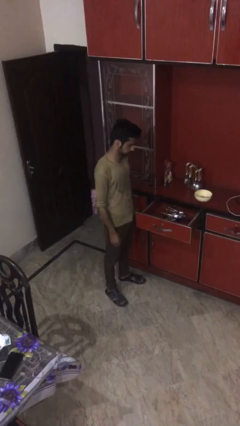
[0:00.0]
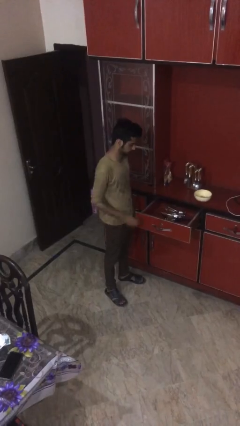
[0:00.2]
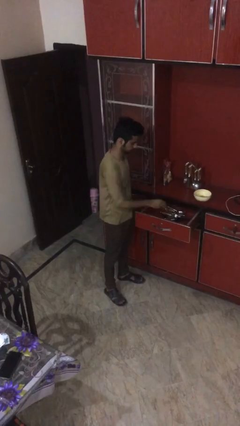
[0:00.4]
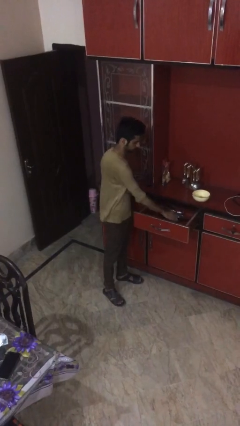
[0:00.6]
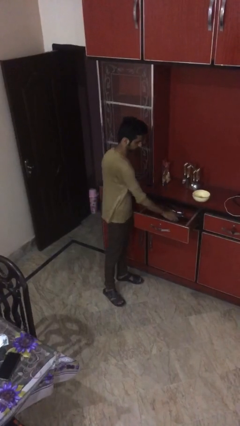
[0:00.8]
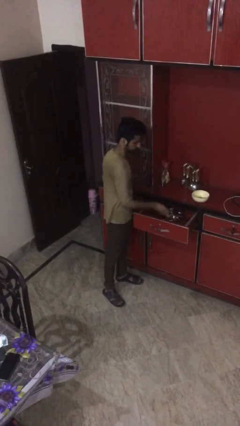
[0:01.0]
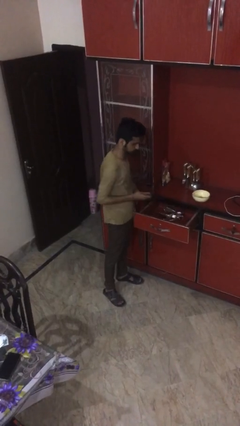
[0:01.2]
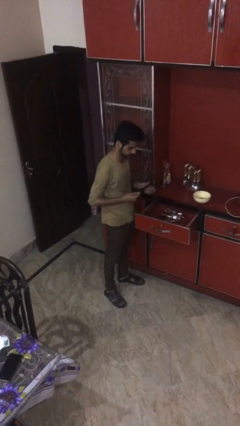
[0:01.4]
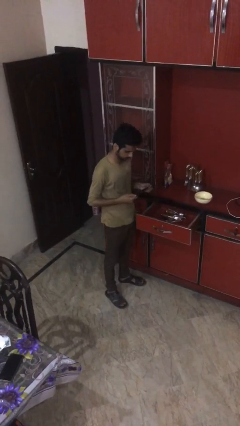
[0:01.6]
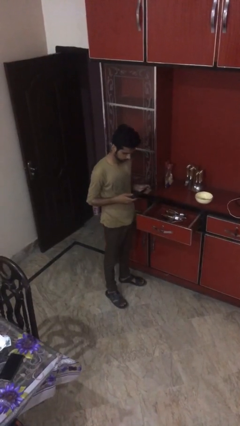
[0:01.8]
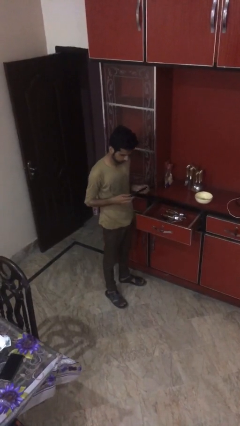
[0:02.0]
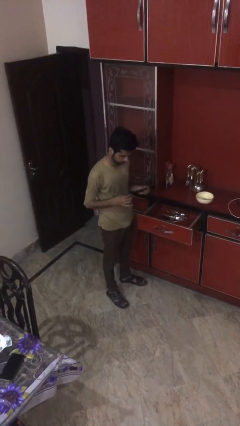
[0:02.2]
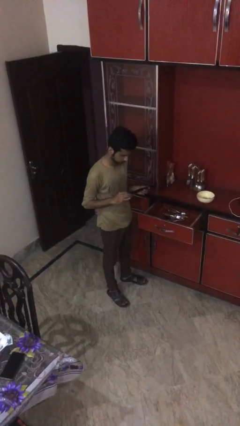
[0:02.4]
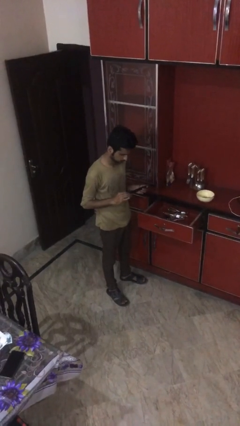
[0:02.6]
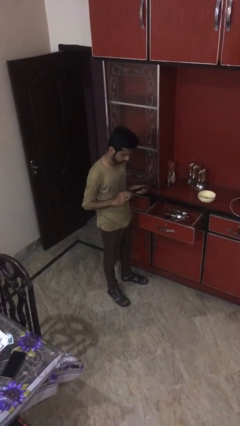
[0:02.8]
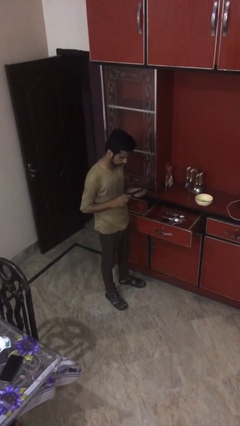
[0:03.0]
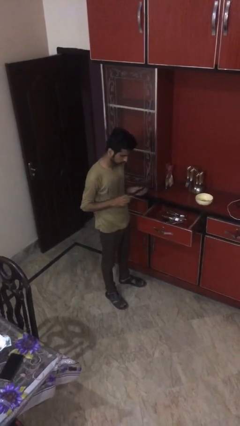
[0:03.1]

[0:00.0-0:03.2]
person takes object from kitchen drawer

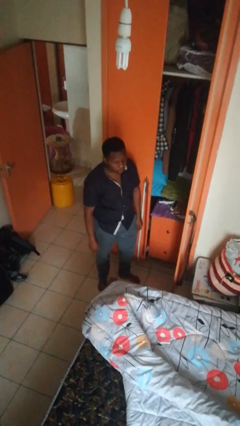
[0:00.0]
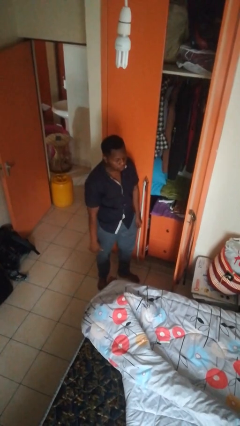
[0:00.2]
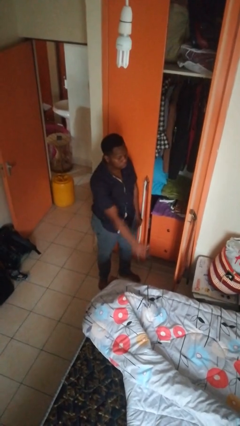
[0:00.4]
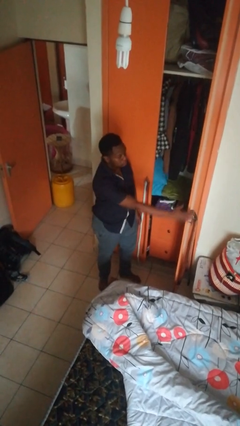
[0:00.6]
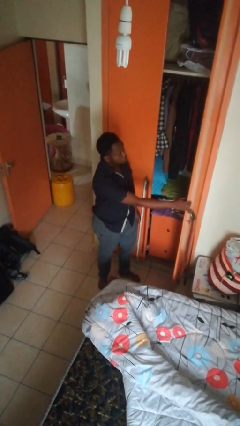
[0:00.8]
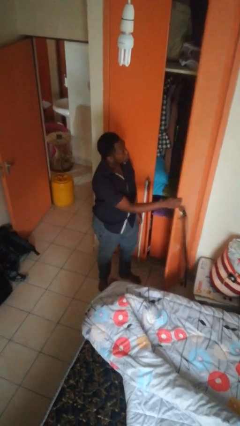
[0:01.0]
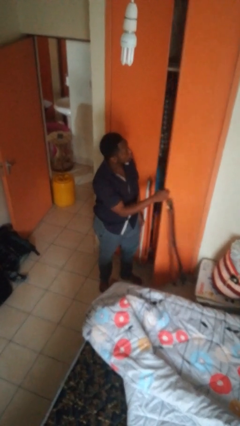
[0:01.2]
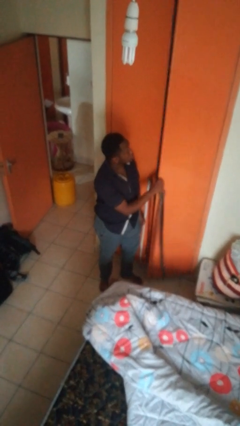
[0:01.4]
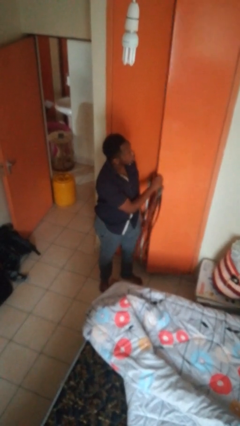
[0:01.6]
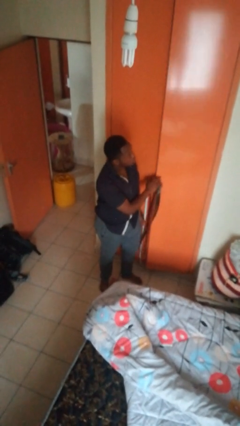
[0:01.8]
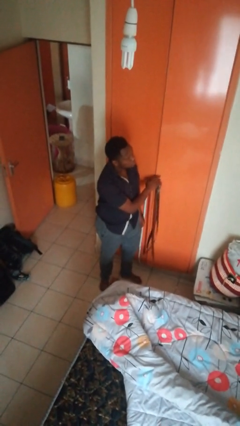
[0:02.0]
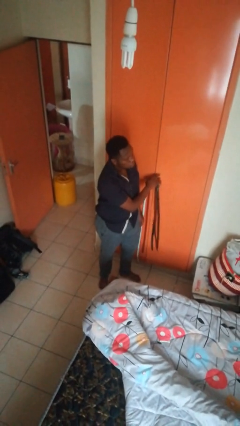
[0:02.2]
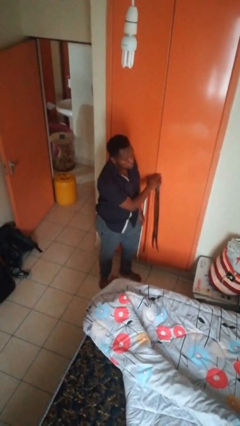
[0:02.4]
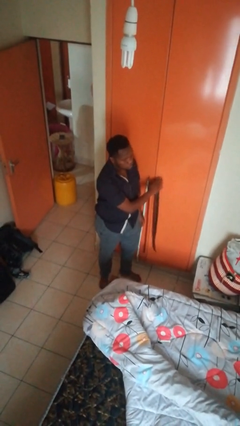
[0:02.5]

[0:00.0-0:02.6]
person closes closet door

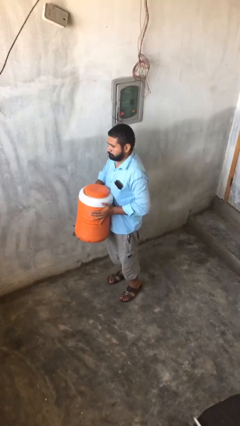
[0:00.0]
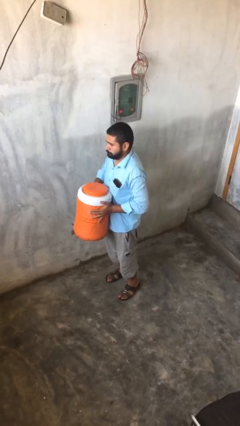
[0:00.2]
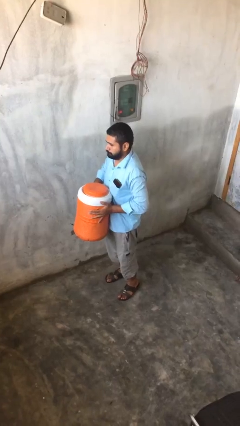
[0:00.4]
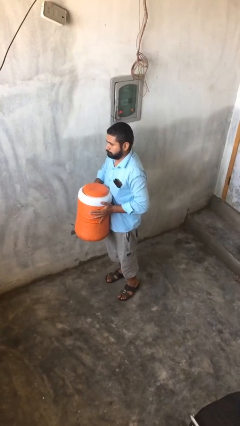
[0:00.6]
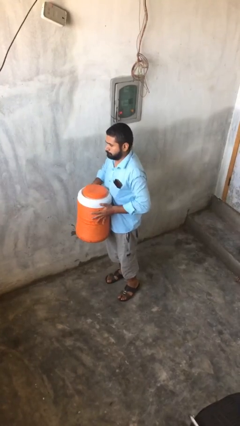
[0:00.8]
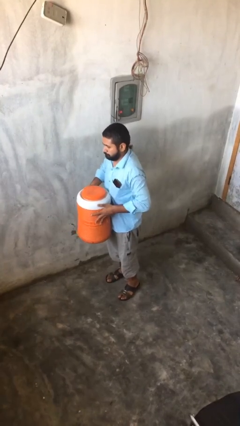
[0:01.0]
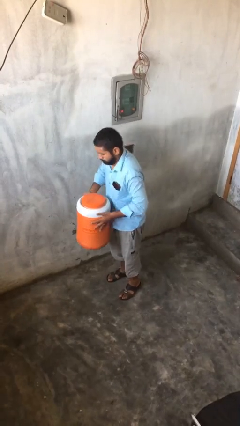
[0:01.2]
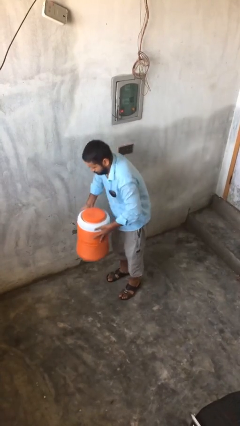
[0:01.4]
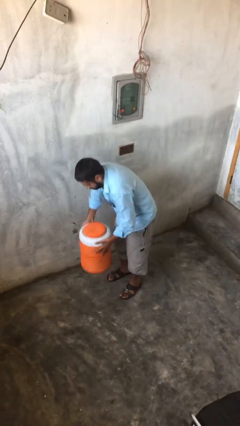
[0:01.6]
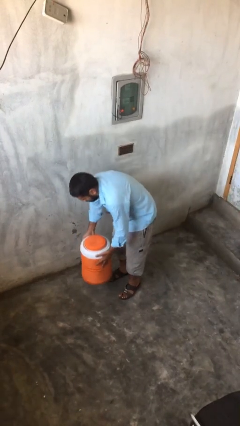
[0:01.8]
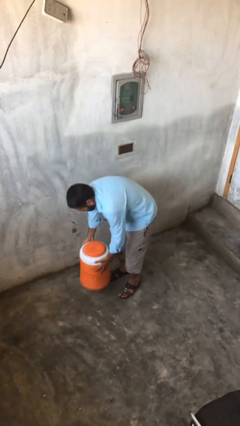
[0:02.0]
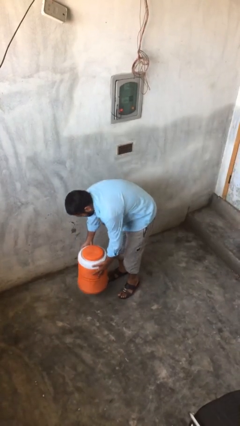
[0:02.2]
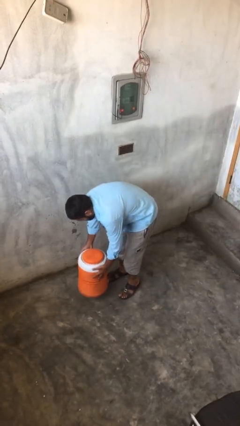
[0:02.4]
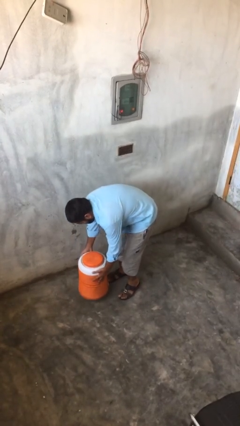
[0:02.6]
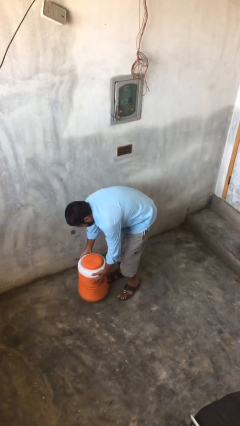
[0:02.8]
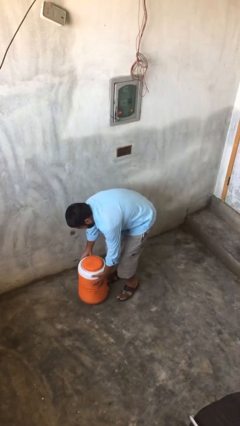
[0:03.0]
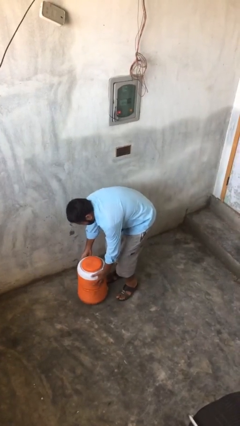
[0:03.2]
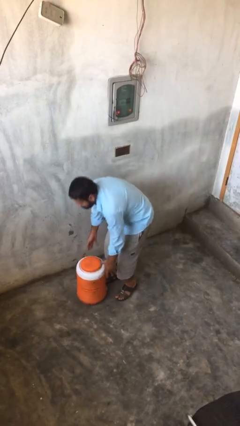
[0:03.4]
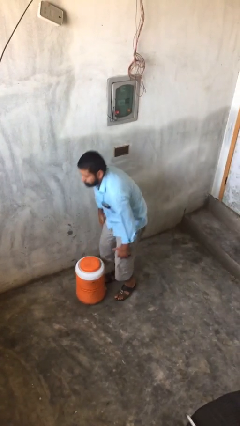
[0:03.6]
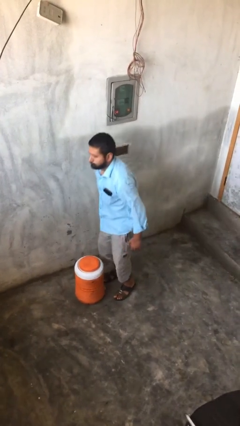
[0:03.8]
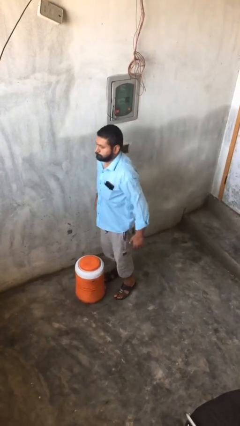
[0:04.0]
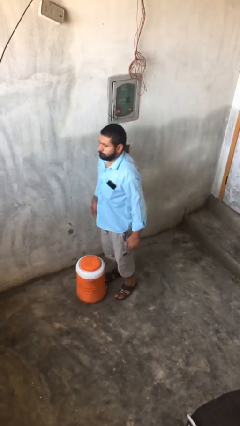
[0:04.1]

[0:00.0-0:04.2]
person puts down object on floor

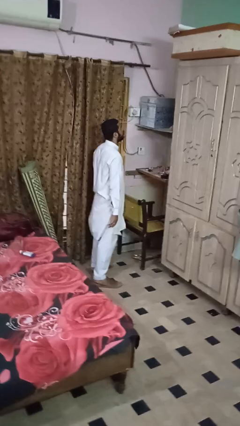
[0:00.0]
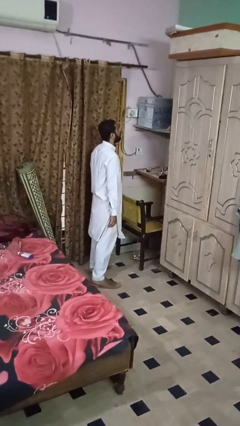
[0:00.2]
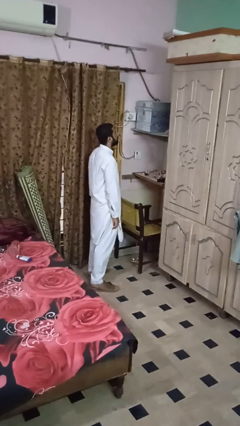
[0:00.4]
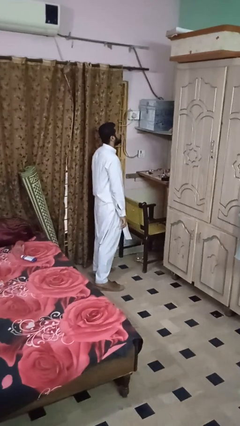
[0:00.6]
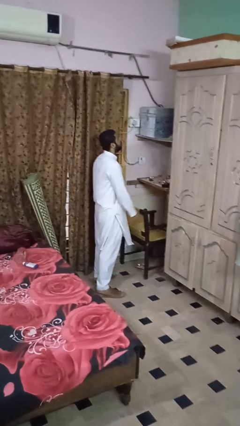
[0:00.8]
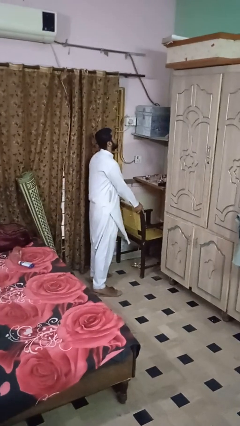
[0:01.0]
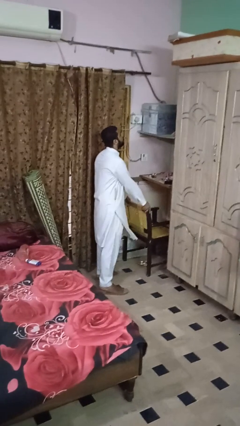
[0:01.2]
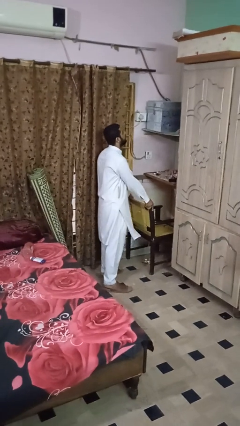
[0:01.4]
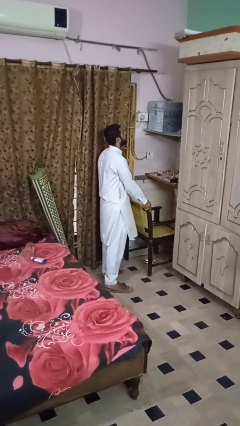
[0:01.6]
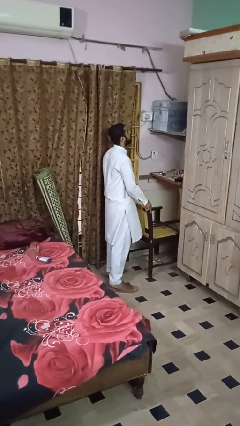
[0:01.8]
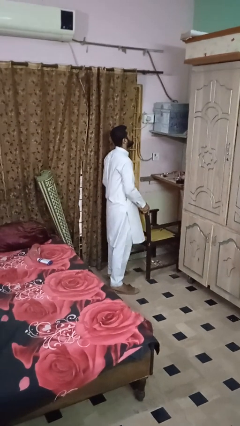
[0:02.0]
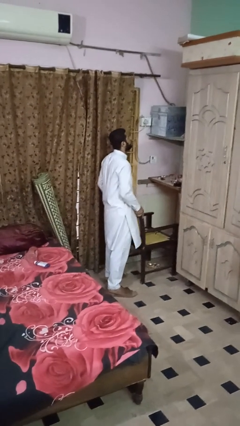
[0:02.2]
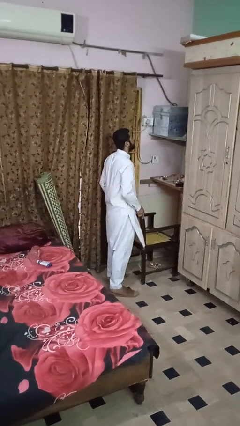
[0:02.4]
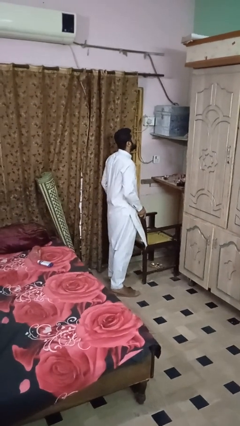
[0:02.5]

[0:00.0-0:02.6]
person pulls out chair

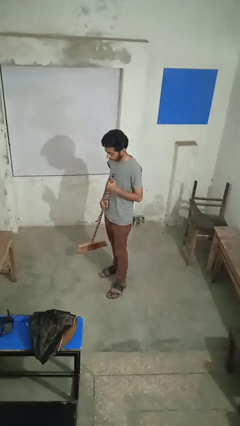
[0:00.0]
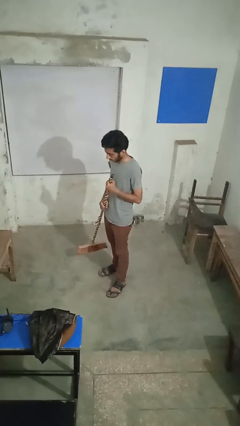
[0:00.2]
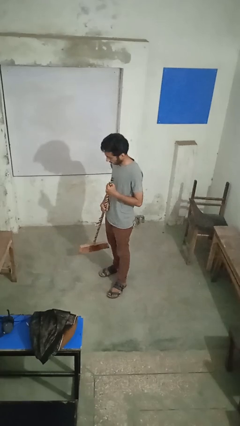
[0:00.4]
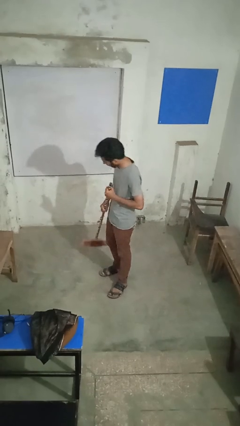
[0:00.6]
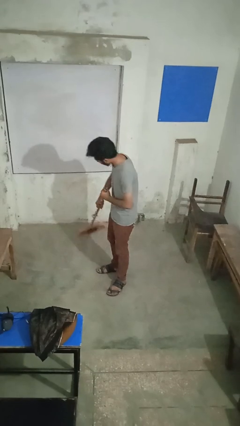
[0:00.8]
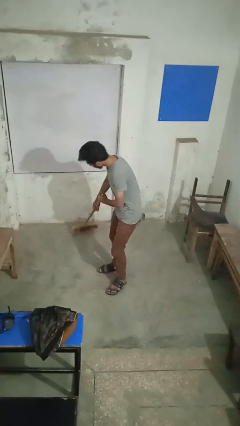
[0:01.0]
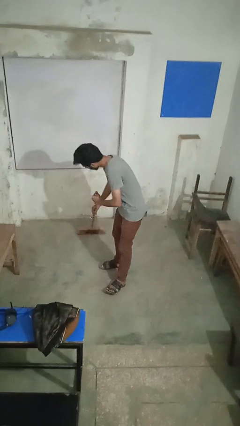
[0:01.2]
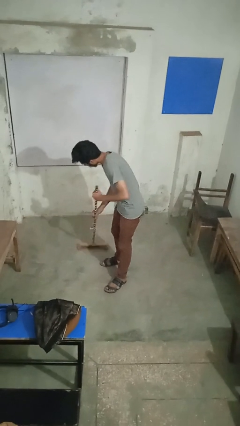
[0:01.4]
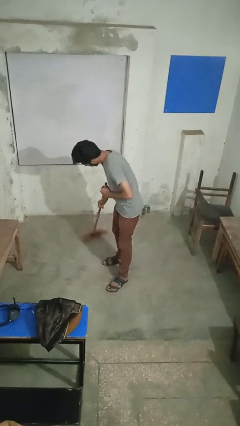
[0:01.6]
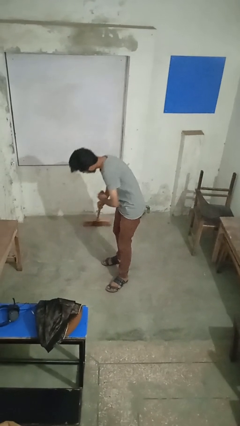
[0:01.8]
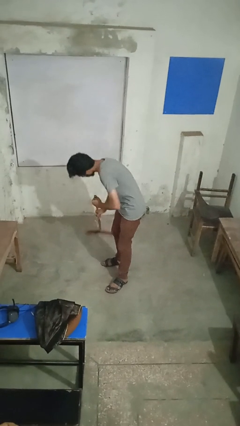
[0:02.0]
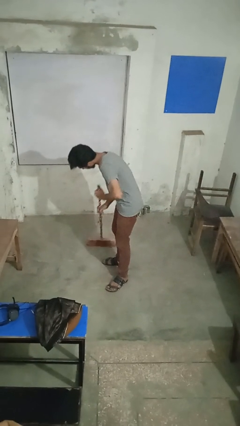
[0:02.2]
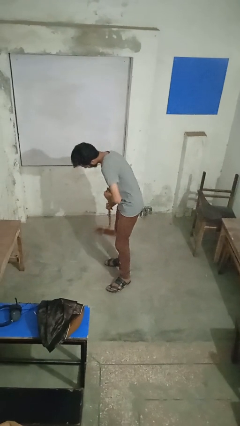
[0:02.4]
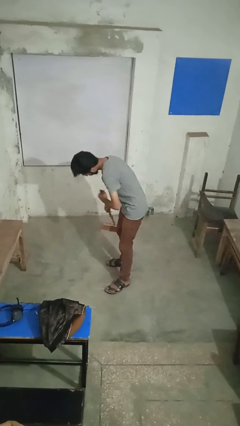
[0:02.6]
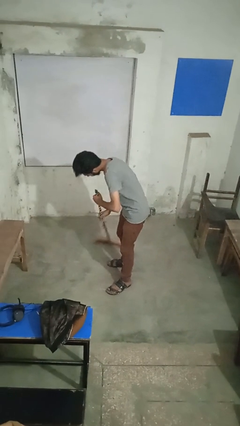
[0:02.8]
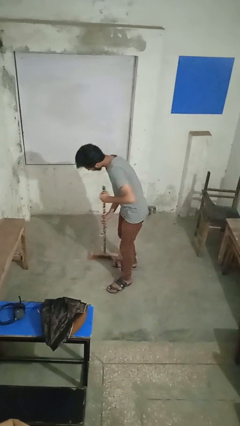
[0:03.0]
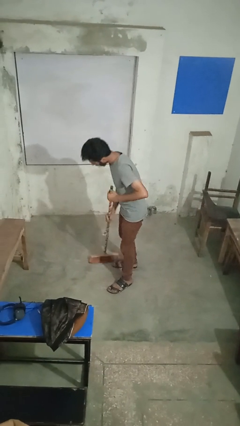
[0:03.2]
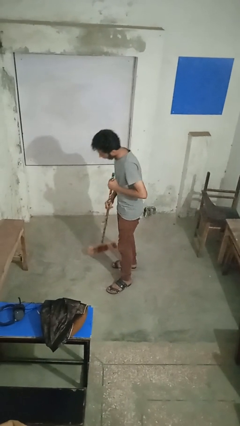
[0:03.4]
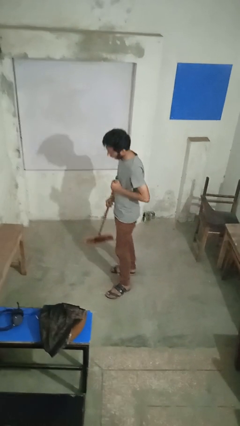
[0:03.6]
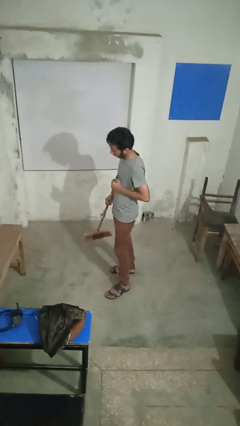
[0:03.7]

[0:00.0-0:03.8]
person sweeps floor

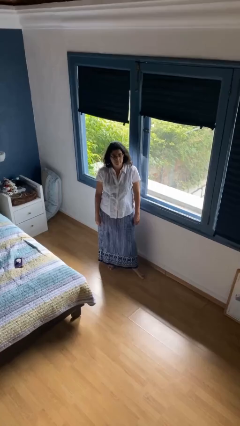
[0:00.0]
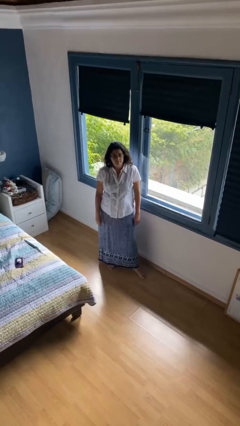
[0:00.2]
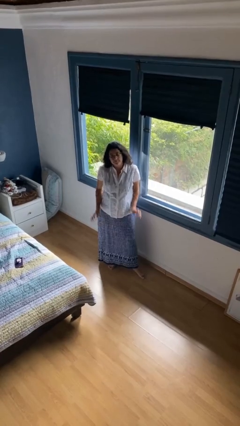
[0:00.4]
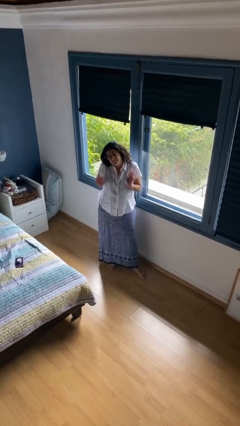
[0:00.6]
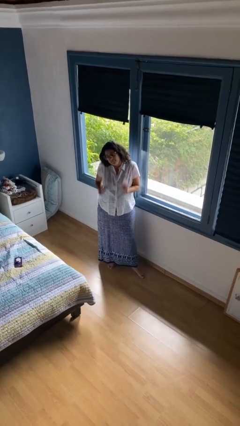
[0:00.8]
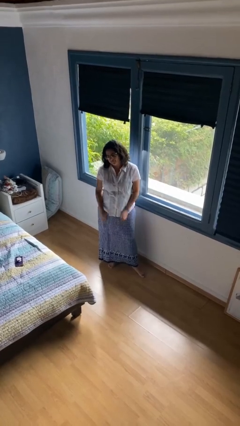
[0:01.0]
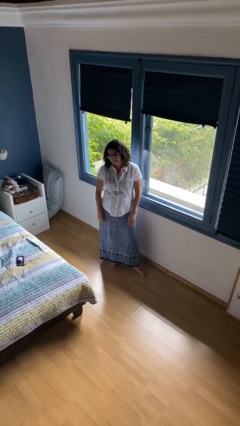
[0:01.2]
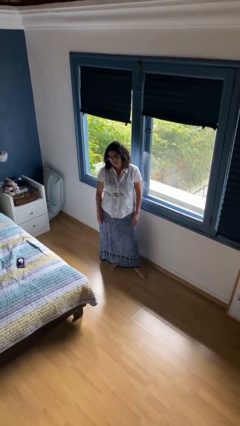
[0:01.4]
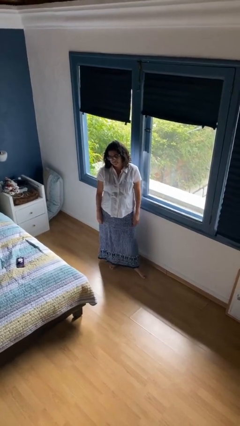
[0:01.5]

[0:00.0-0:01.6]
person shrugs
